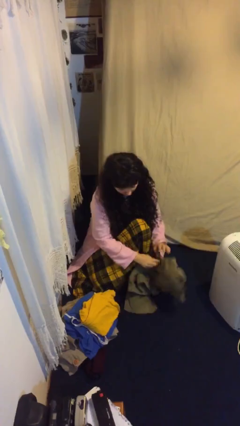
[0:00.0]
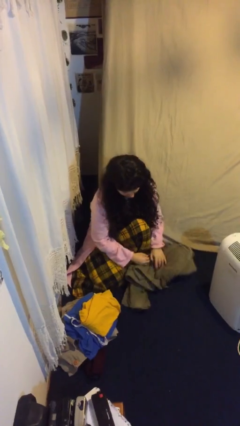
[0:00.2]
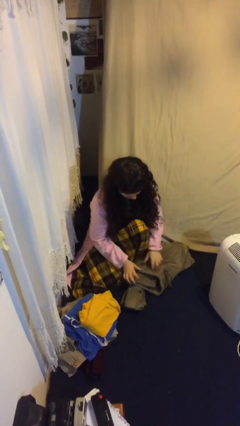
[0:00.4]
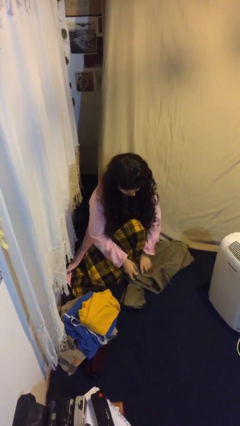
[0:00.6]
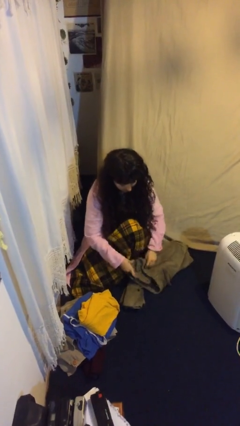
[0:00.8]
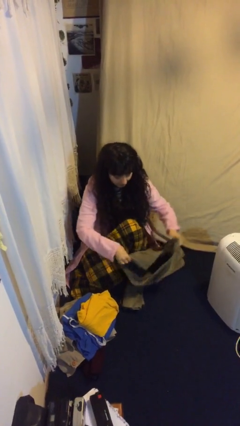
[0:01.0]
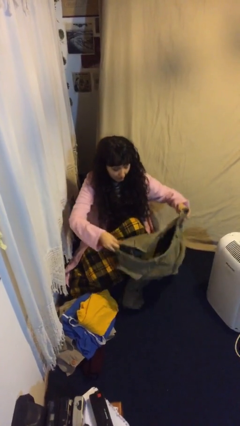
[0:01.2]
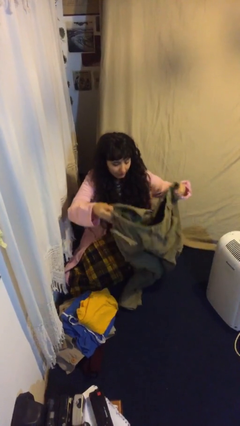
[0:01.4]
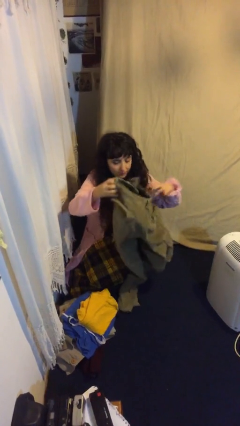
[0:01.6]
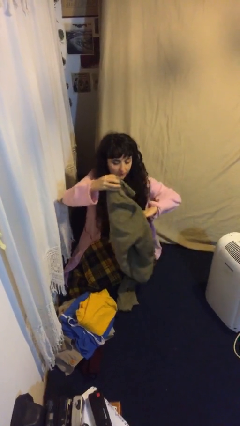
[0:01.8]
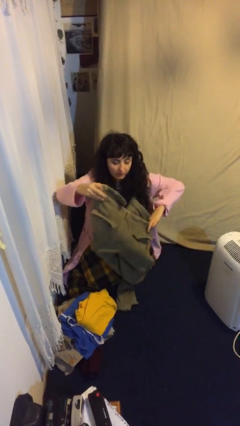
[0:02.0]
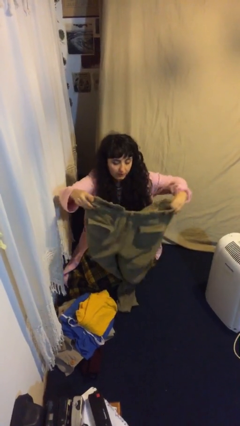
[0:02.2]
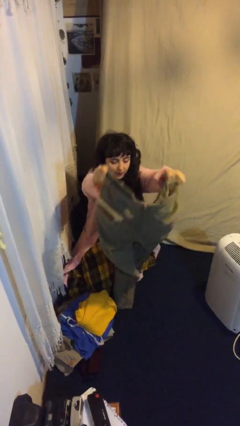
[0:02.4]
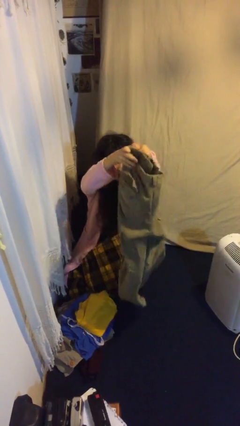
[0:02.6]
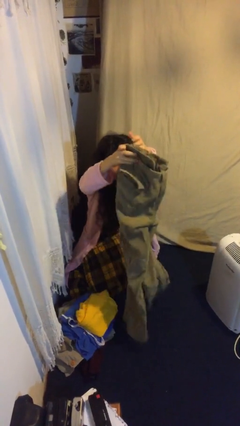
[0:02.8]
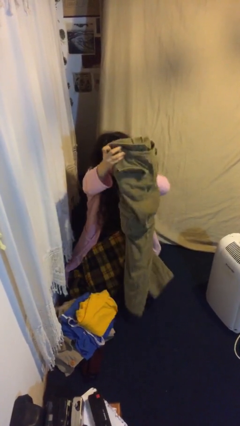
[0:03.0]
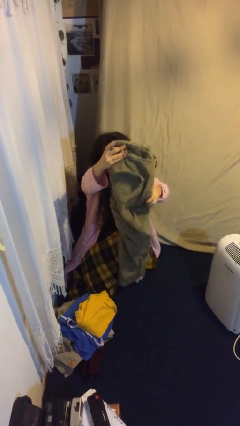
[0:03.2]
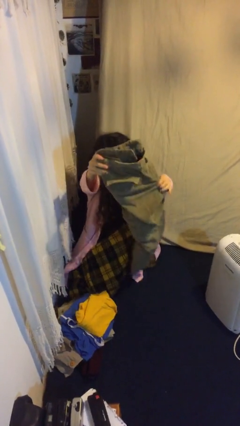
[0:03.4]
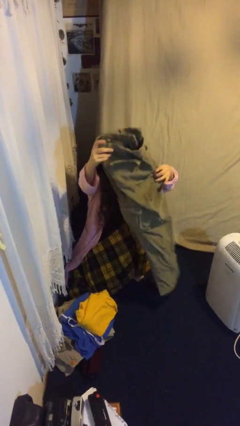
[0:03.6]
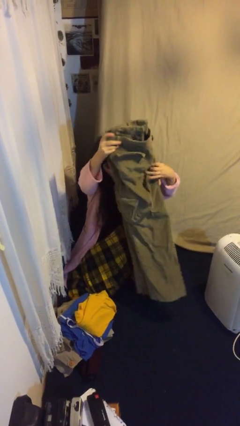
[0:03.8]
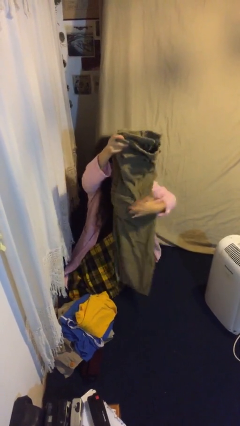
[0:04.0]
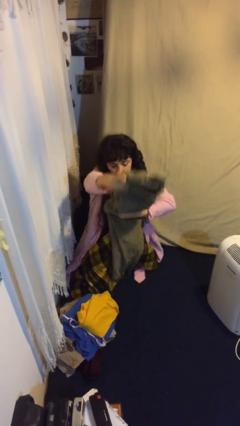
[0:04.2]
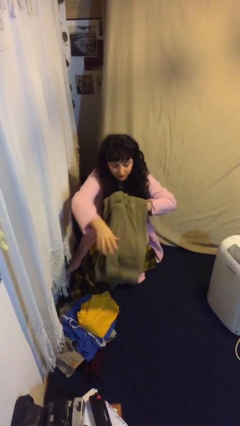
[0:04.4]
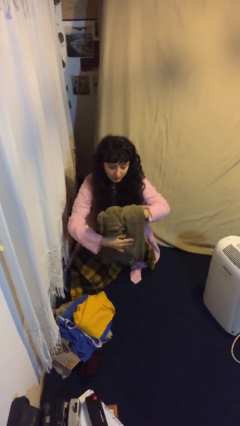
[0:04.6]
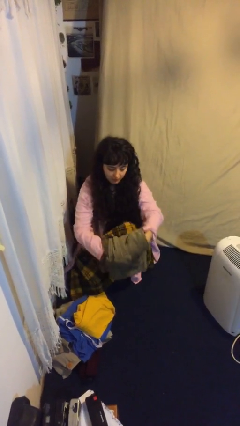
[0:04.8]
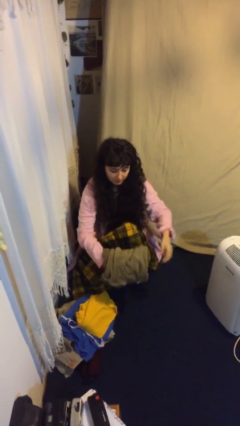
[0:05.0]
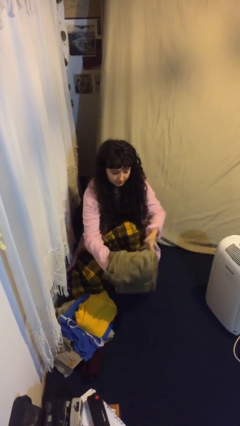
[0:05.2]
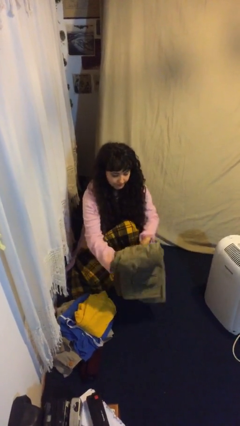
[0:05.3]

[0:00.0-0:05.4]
person folds pants

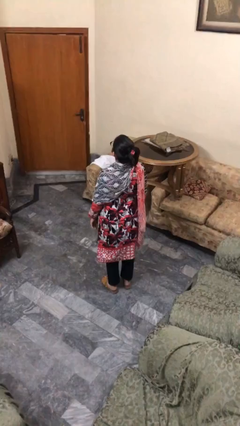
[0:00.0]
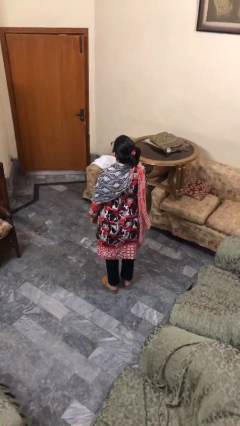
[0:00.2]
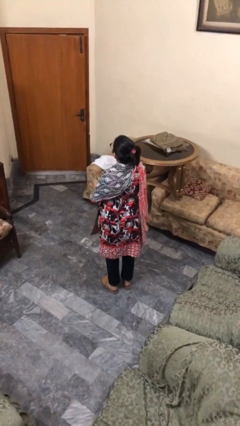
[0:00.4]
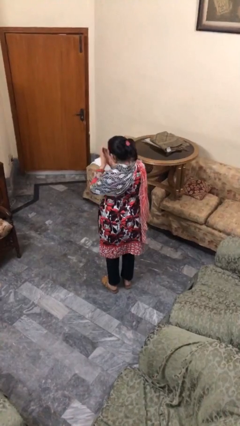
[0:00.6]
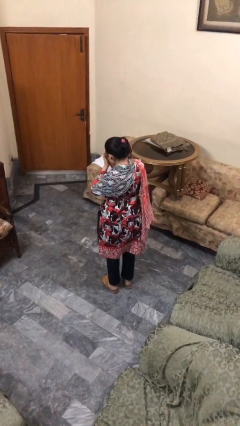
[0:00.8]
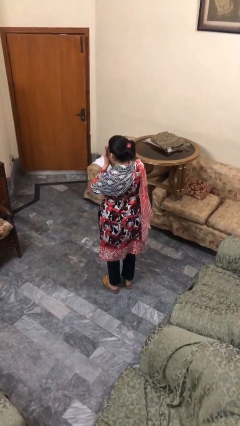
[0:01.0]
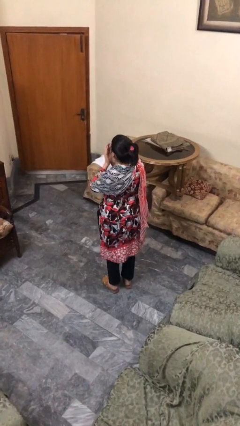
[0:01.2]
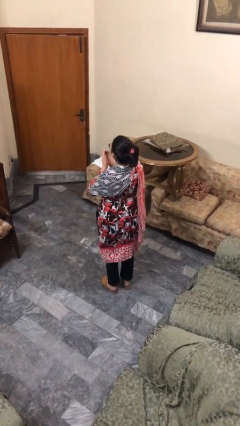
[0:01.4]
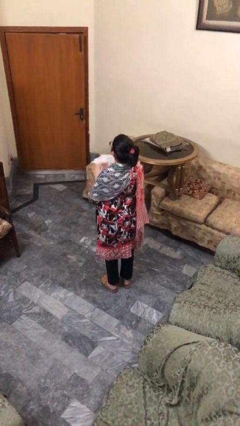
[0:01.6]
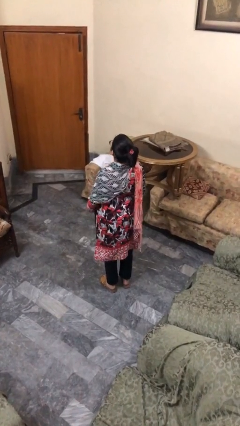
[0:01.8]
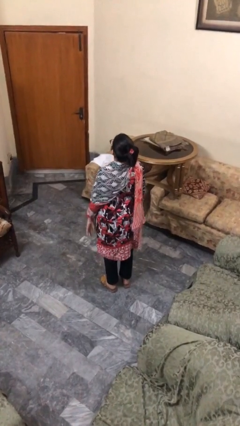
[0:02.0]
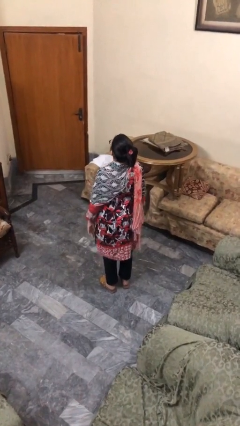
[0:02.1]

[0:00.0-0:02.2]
person sneezes into hand

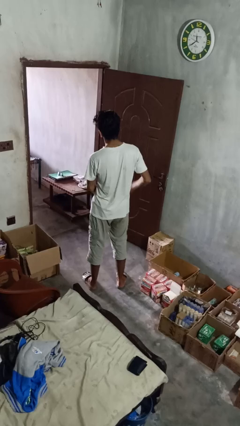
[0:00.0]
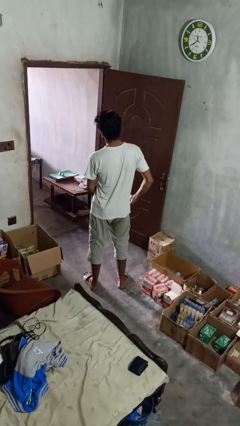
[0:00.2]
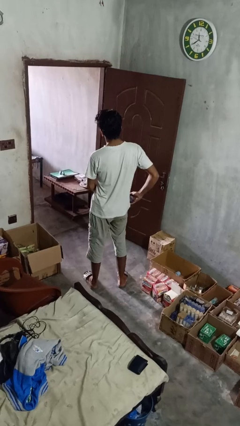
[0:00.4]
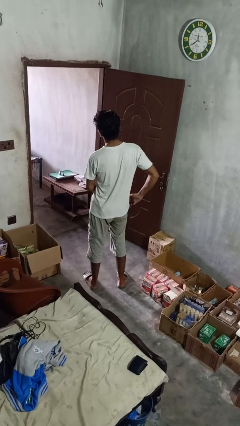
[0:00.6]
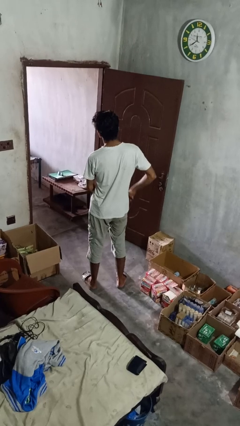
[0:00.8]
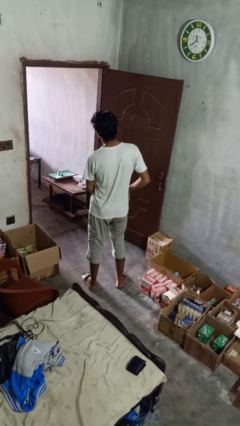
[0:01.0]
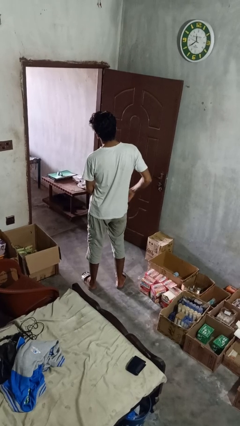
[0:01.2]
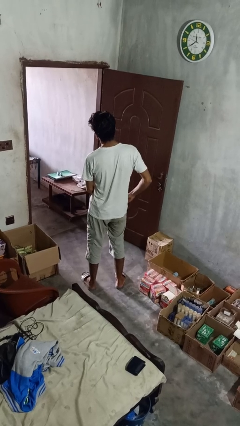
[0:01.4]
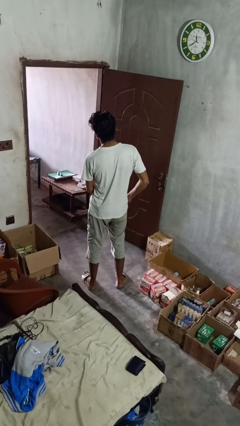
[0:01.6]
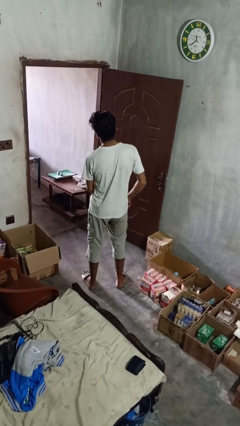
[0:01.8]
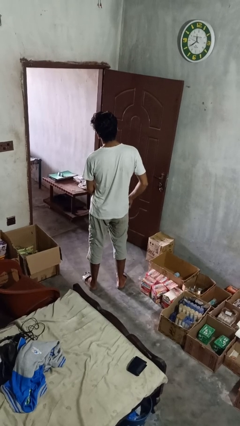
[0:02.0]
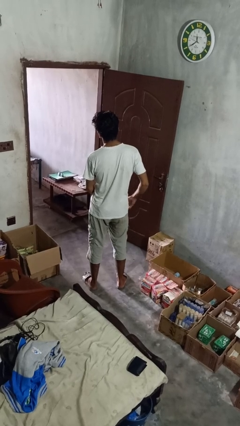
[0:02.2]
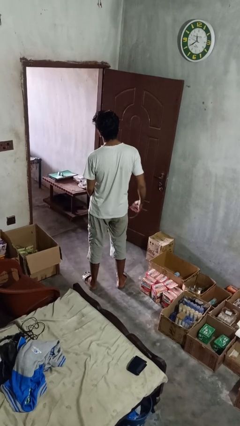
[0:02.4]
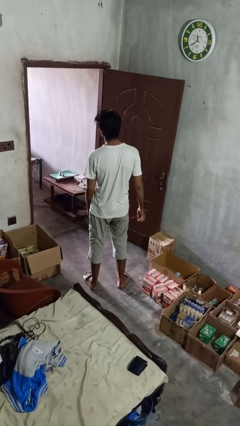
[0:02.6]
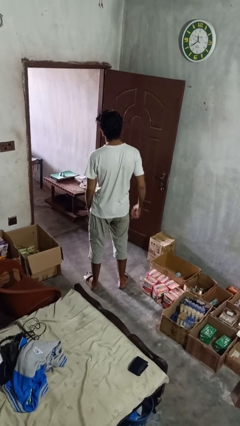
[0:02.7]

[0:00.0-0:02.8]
person puts phone into pocket

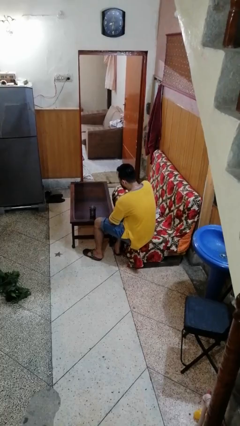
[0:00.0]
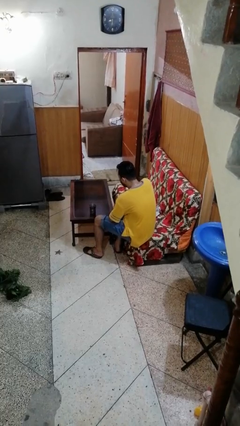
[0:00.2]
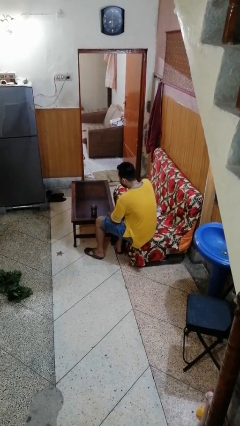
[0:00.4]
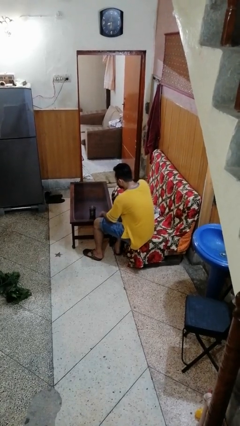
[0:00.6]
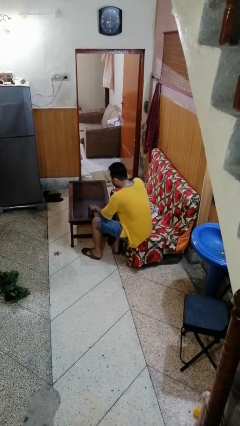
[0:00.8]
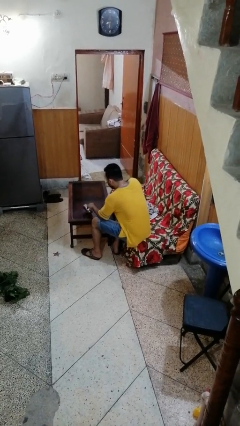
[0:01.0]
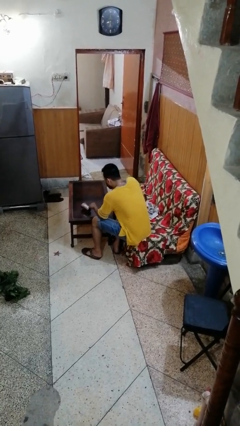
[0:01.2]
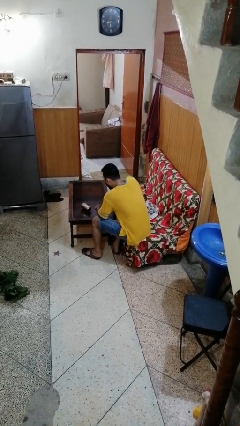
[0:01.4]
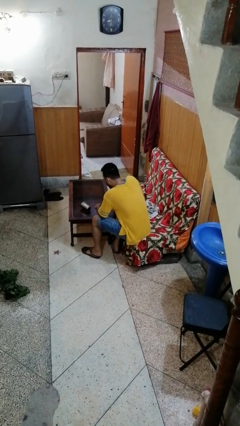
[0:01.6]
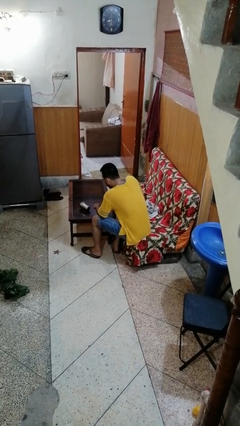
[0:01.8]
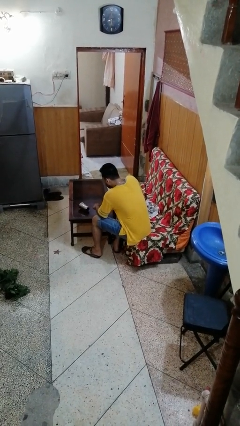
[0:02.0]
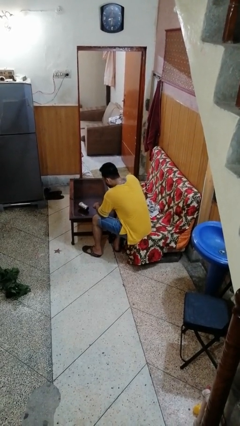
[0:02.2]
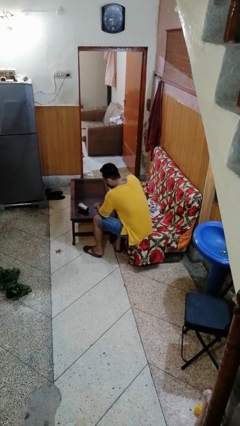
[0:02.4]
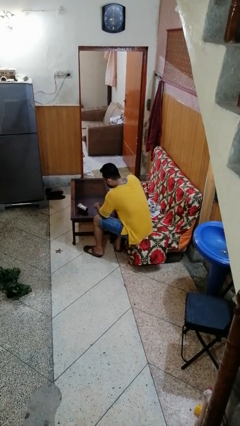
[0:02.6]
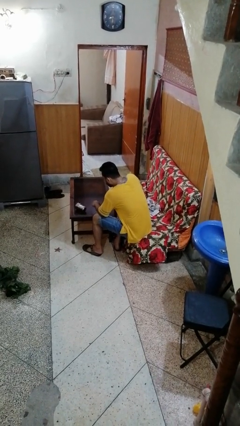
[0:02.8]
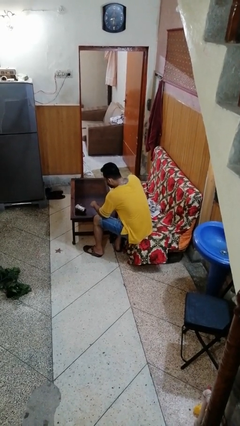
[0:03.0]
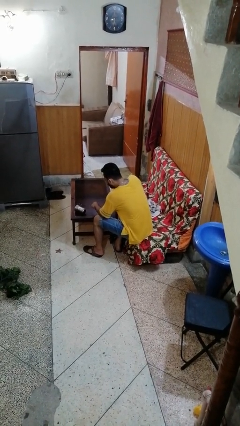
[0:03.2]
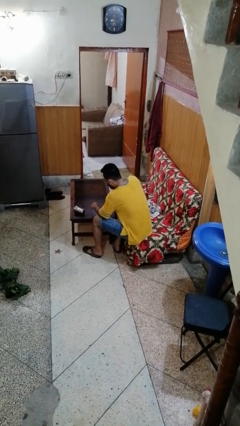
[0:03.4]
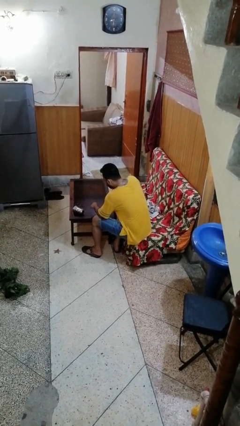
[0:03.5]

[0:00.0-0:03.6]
person spills on table

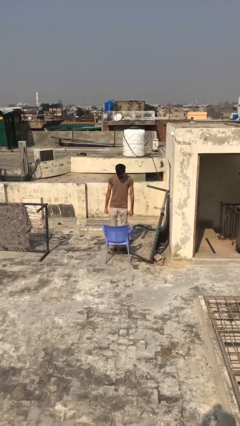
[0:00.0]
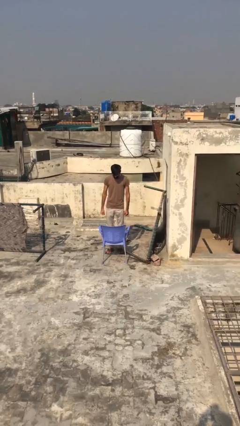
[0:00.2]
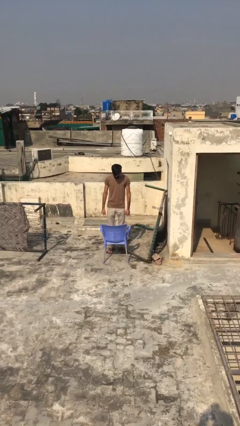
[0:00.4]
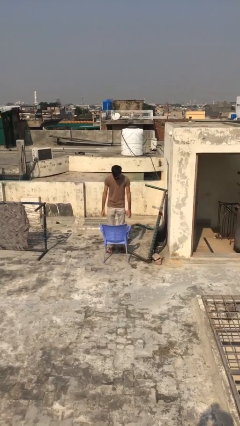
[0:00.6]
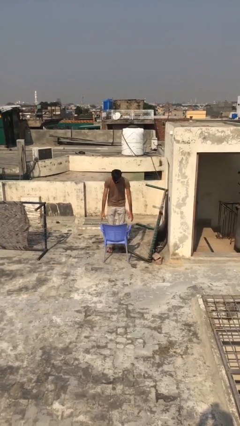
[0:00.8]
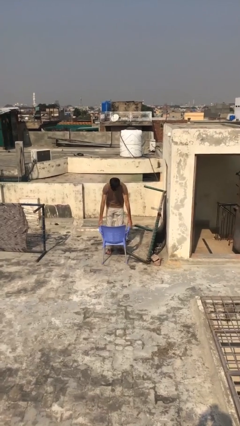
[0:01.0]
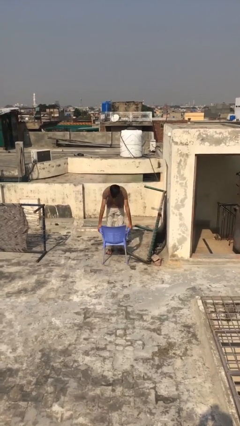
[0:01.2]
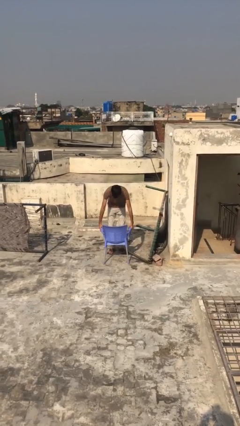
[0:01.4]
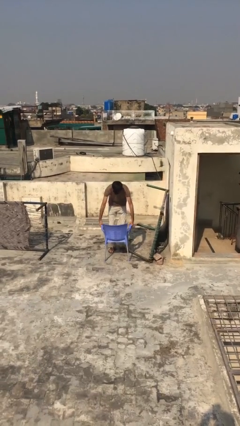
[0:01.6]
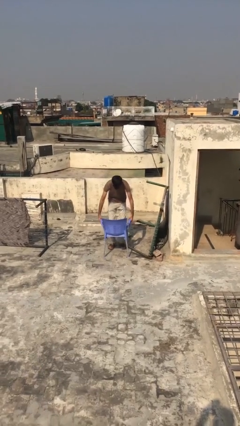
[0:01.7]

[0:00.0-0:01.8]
person picks up object from floor

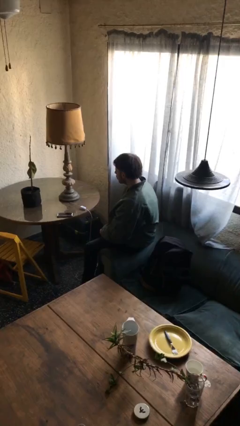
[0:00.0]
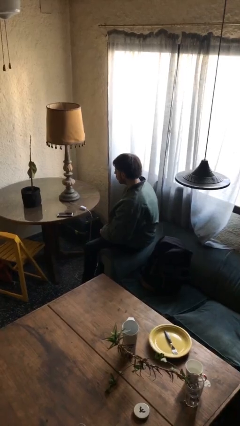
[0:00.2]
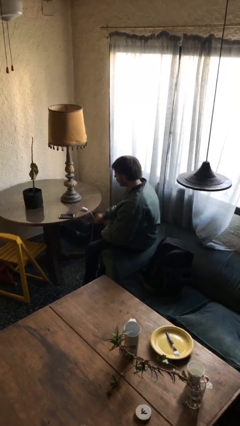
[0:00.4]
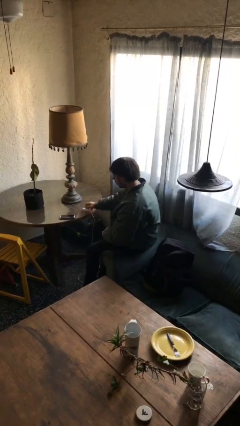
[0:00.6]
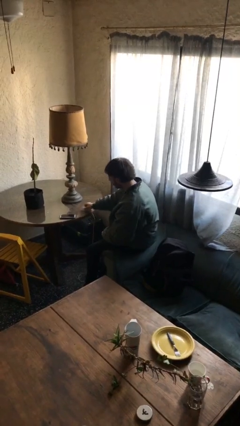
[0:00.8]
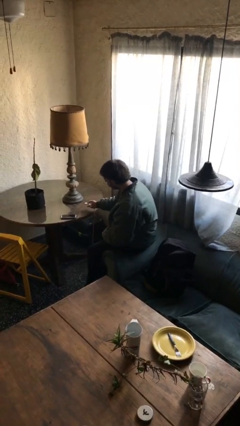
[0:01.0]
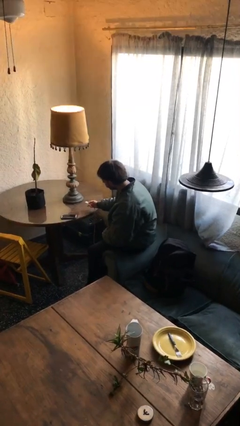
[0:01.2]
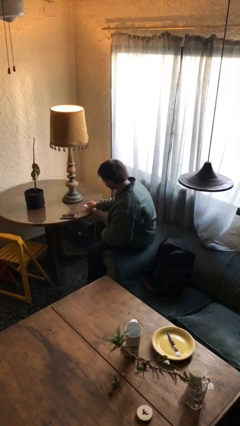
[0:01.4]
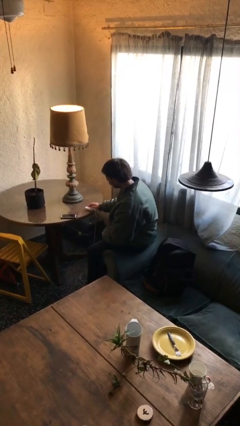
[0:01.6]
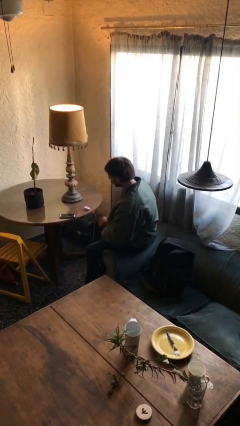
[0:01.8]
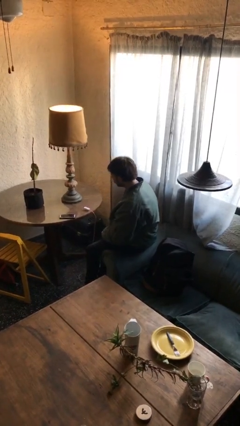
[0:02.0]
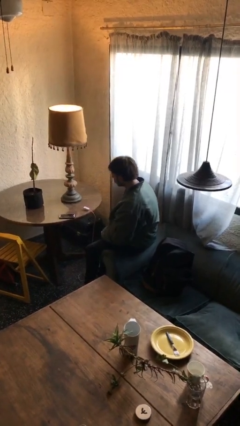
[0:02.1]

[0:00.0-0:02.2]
person turns on lamp
